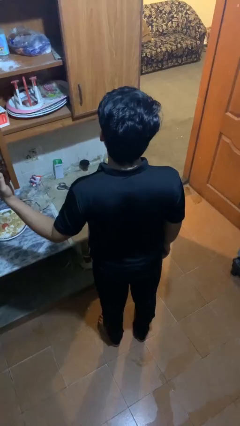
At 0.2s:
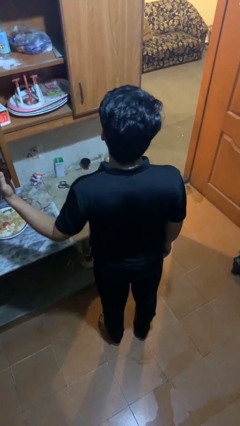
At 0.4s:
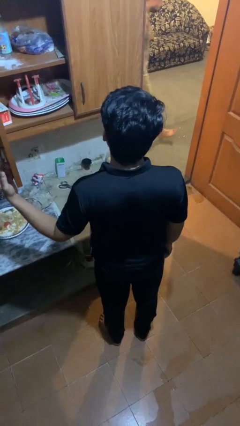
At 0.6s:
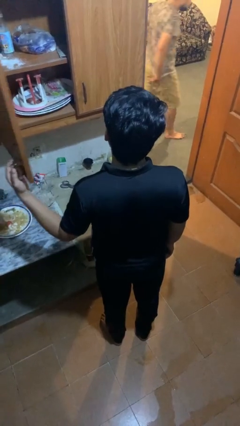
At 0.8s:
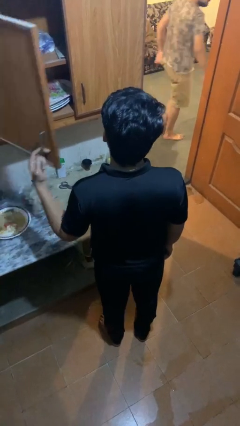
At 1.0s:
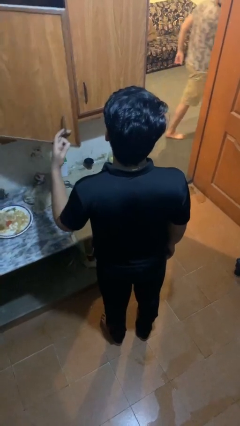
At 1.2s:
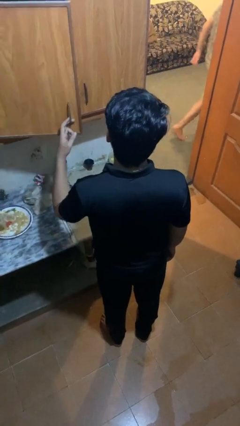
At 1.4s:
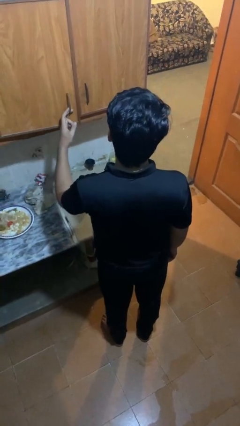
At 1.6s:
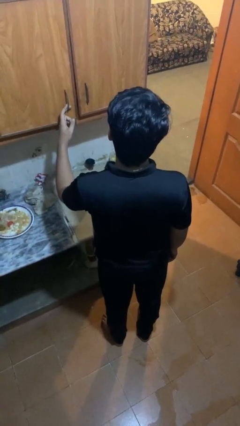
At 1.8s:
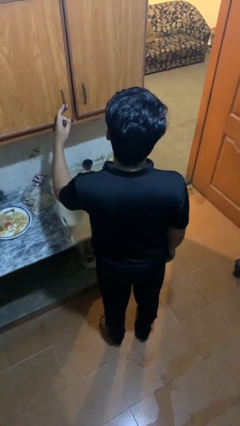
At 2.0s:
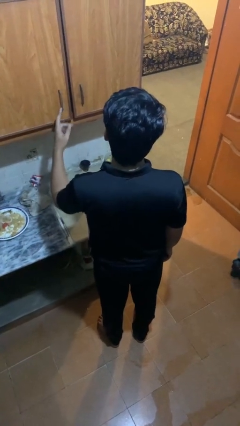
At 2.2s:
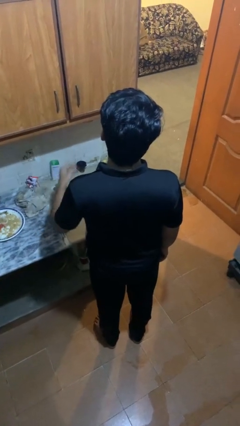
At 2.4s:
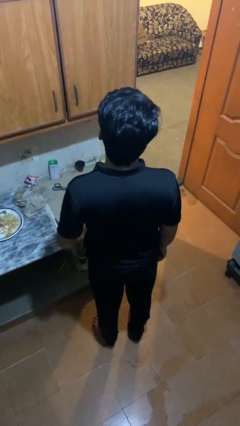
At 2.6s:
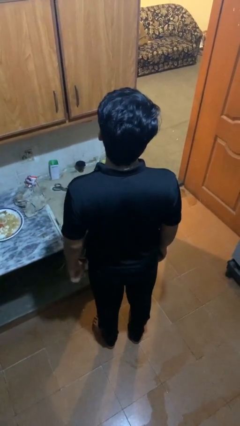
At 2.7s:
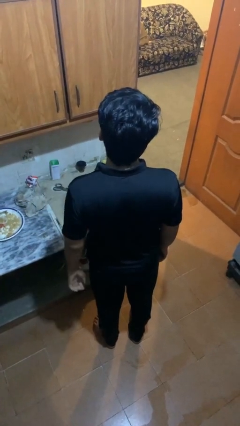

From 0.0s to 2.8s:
person closes cabinet

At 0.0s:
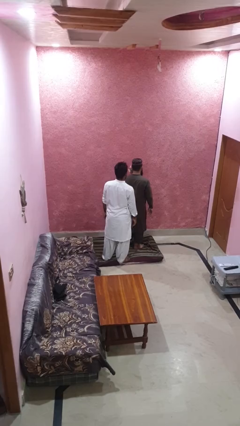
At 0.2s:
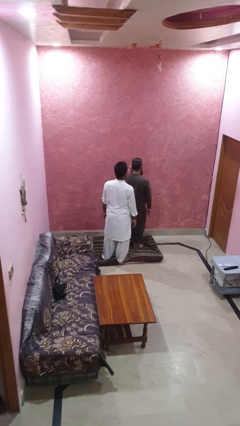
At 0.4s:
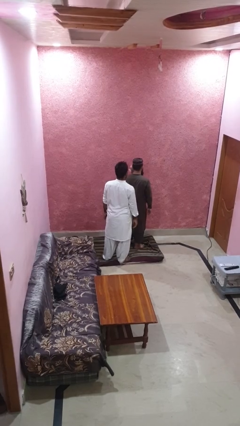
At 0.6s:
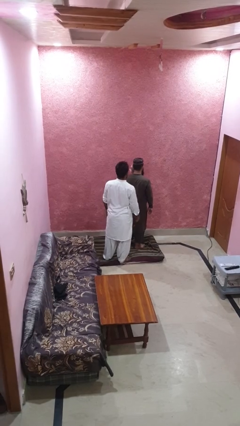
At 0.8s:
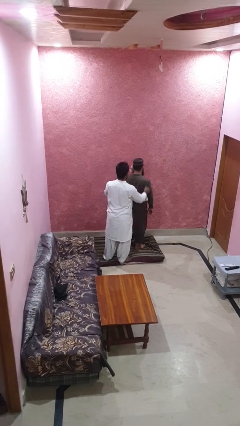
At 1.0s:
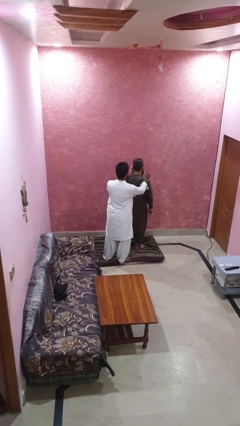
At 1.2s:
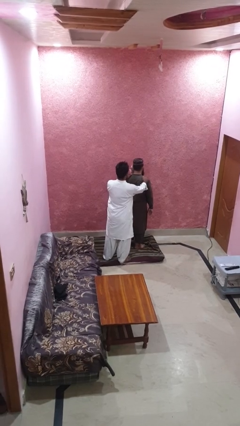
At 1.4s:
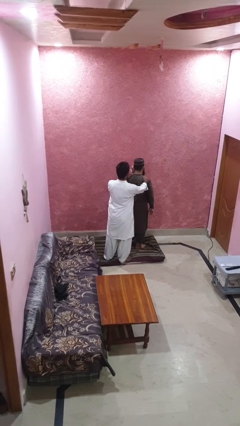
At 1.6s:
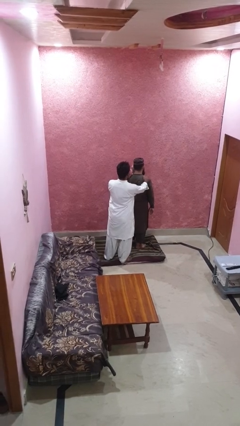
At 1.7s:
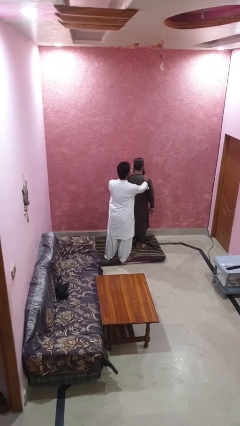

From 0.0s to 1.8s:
person grabs person by shoulder

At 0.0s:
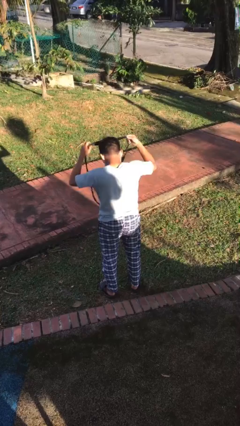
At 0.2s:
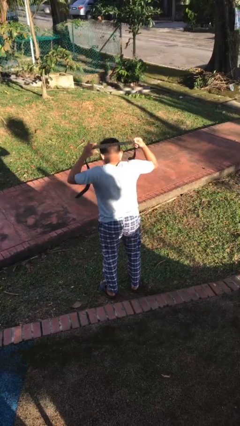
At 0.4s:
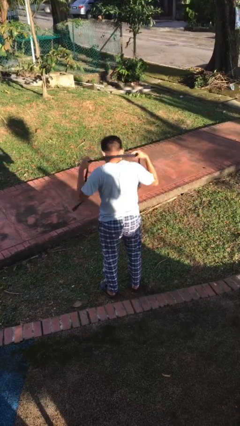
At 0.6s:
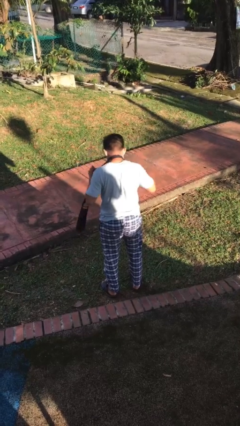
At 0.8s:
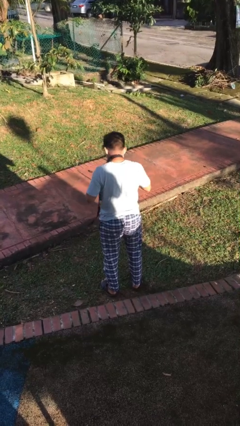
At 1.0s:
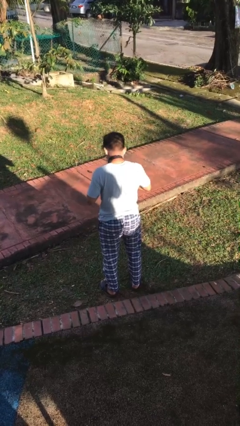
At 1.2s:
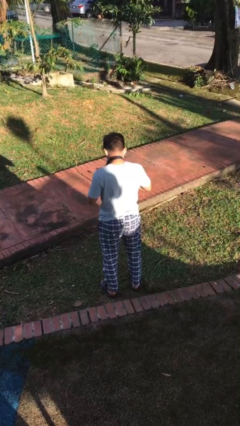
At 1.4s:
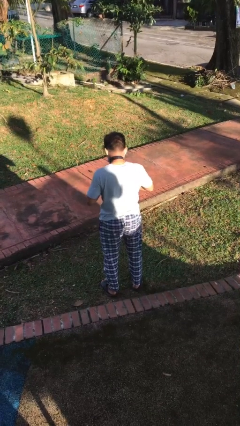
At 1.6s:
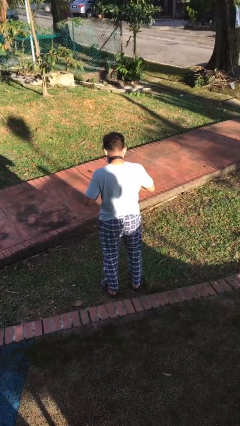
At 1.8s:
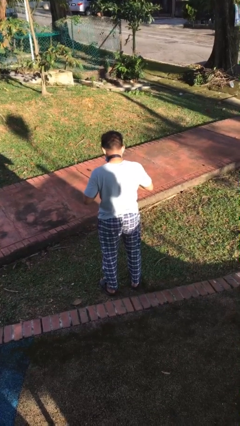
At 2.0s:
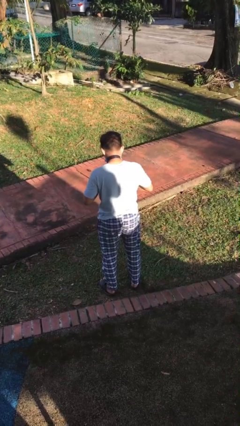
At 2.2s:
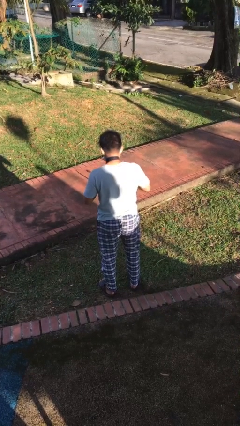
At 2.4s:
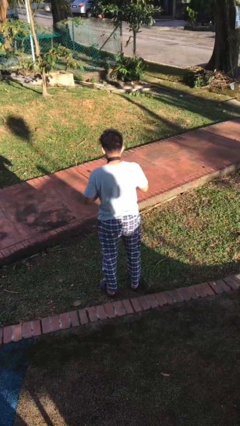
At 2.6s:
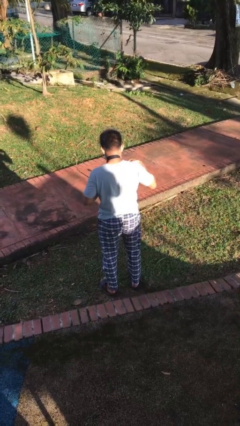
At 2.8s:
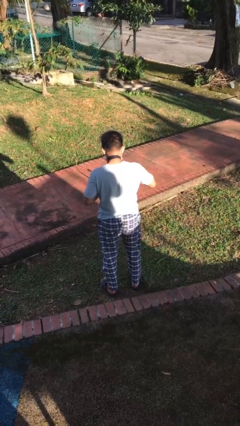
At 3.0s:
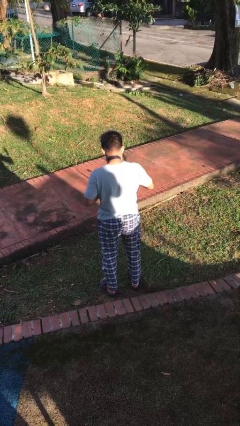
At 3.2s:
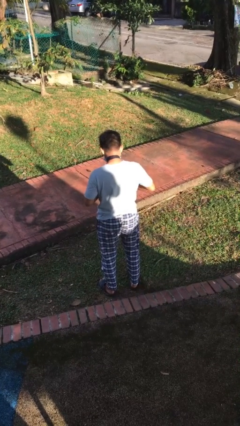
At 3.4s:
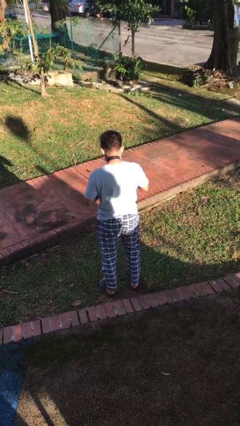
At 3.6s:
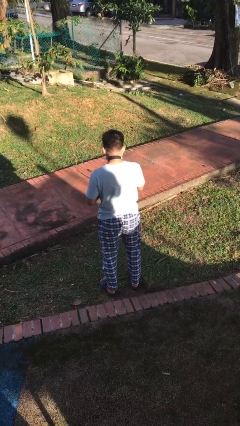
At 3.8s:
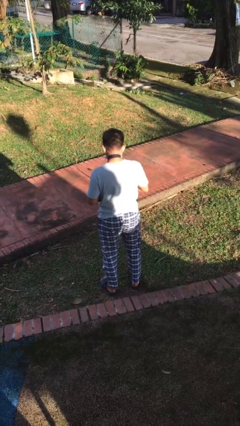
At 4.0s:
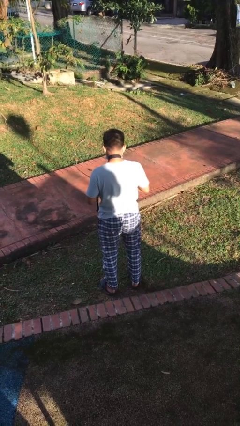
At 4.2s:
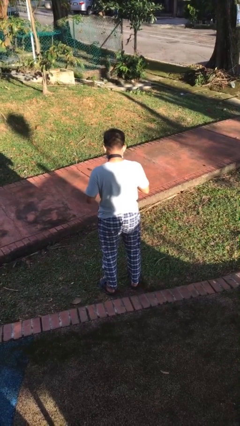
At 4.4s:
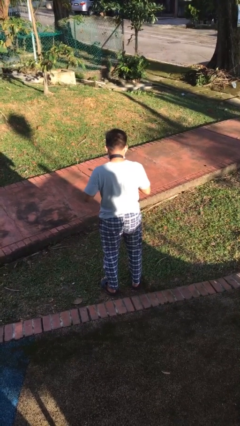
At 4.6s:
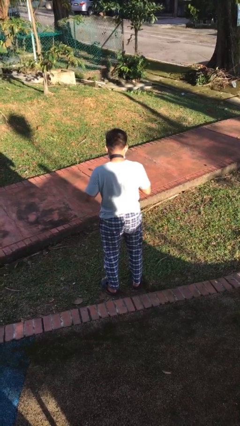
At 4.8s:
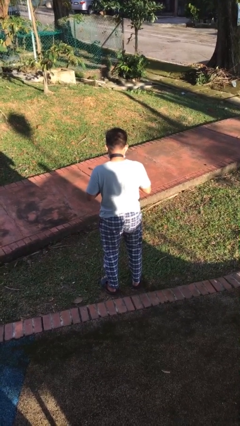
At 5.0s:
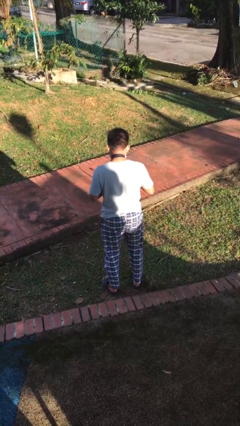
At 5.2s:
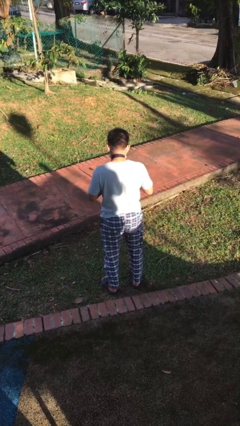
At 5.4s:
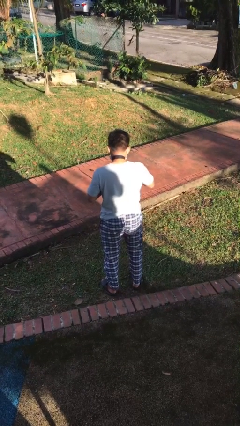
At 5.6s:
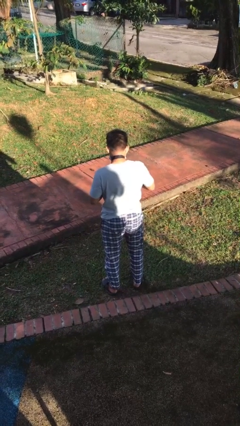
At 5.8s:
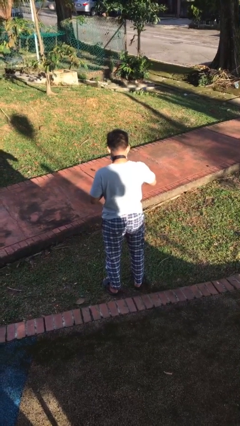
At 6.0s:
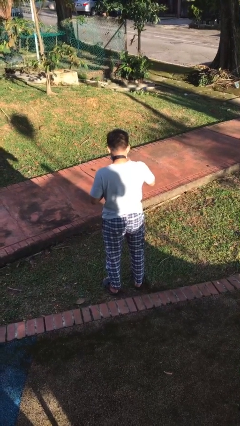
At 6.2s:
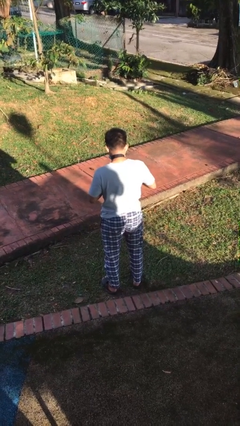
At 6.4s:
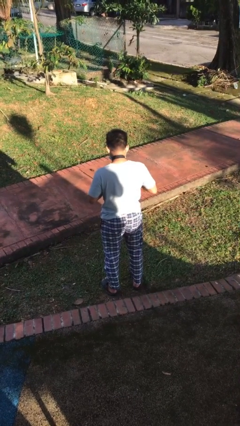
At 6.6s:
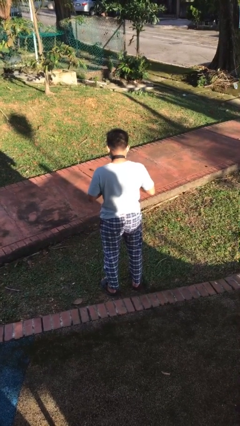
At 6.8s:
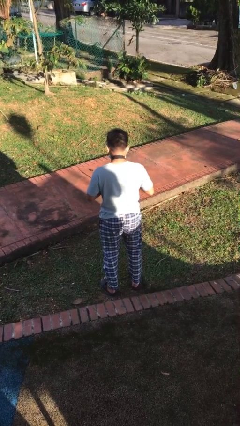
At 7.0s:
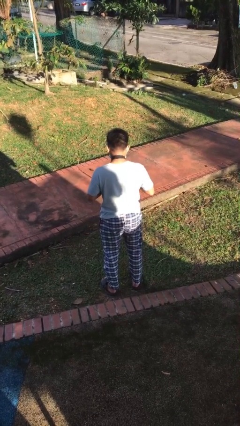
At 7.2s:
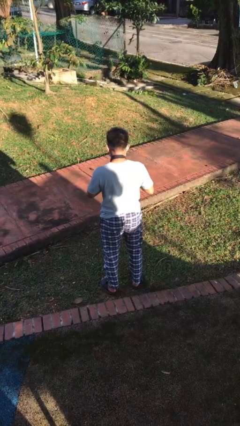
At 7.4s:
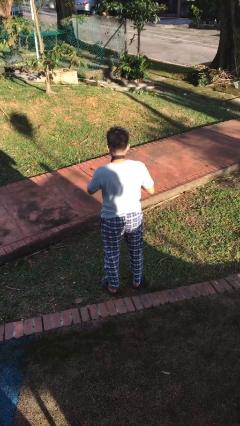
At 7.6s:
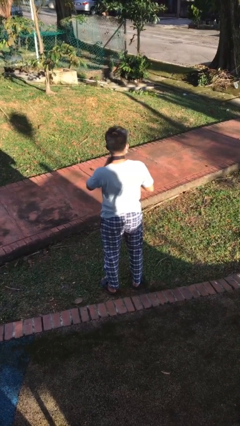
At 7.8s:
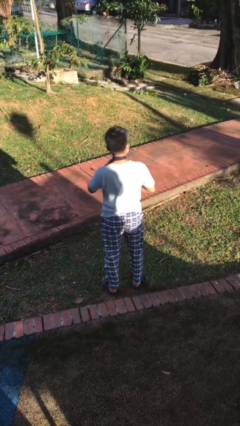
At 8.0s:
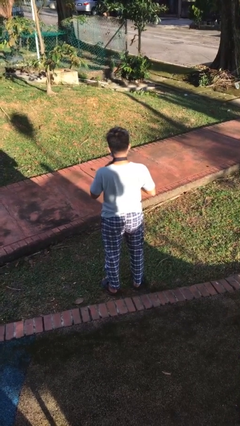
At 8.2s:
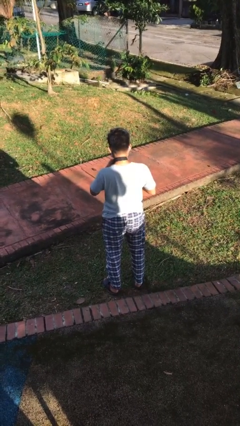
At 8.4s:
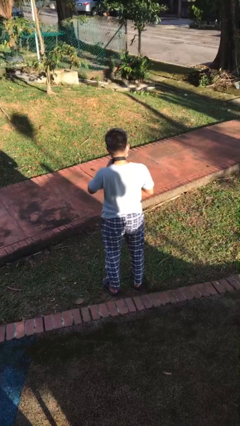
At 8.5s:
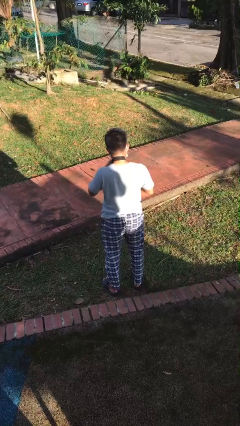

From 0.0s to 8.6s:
person puts on necktie

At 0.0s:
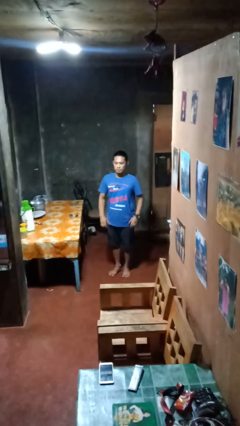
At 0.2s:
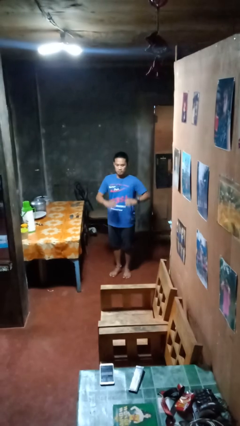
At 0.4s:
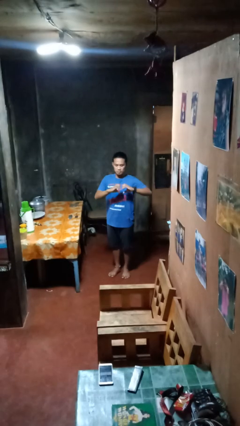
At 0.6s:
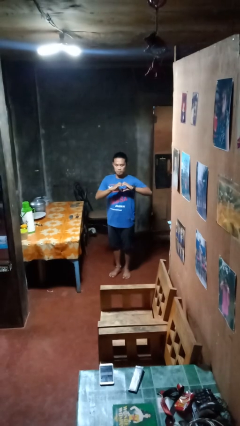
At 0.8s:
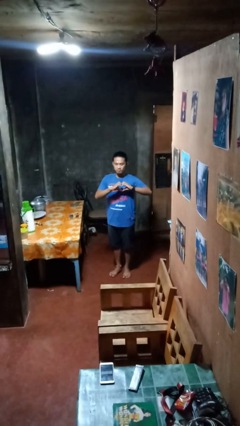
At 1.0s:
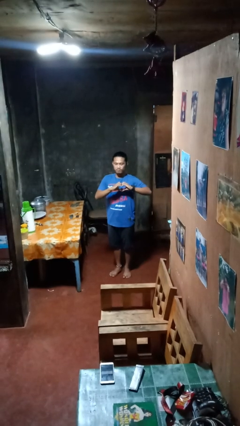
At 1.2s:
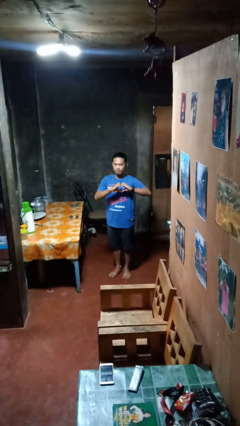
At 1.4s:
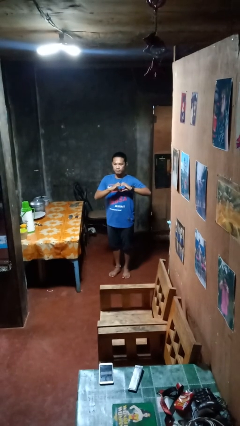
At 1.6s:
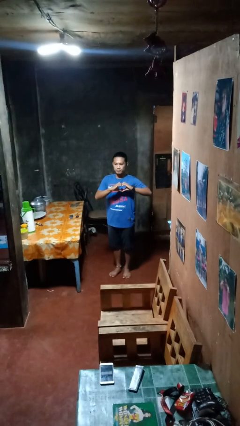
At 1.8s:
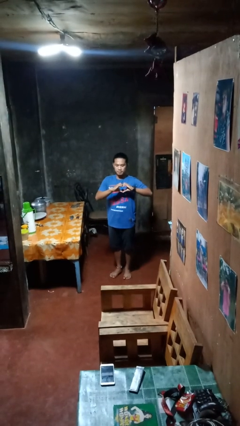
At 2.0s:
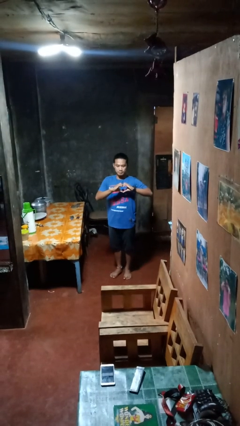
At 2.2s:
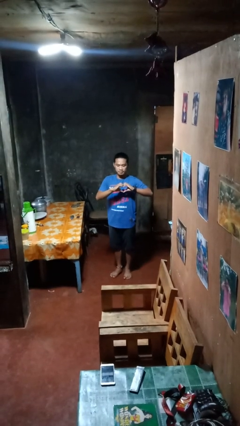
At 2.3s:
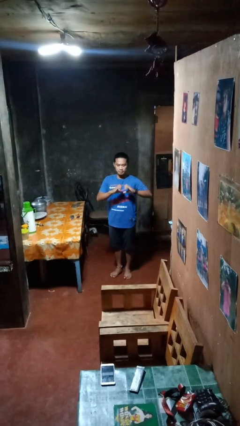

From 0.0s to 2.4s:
person gestures heart

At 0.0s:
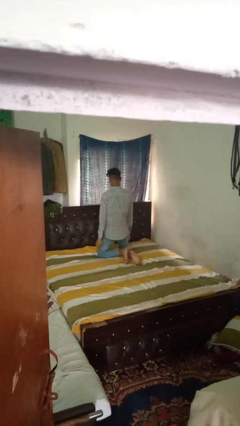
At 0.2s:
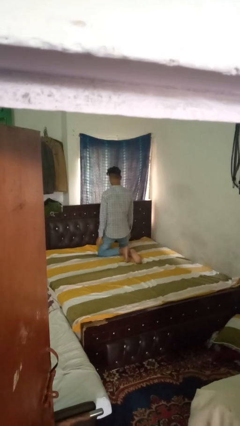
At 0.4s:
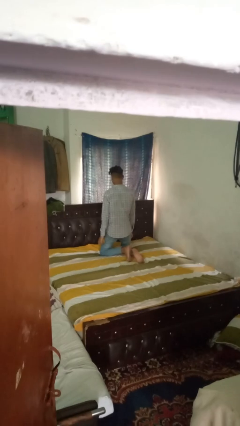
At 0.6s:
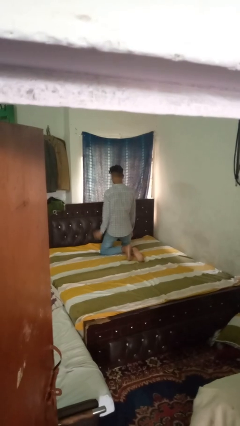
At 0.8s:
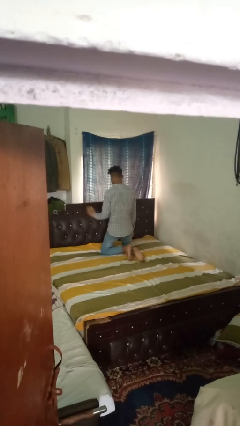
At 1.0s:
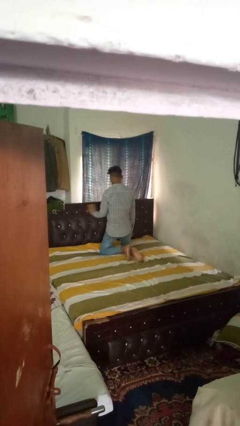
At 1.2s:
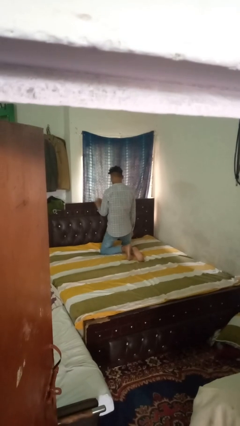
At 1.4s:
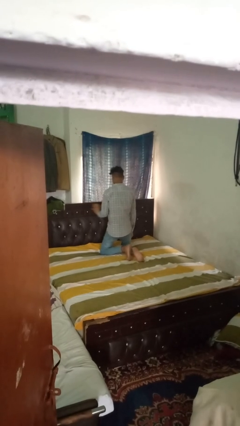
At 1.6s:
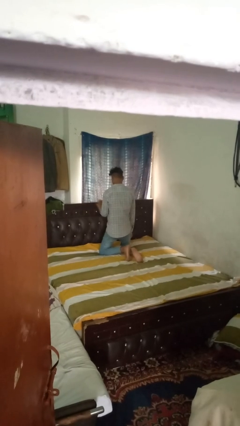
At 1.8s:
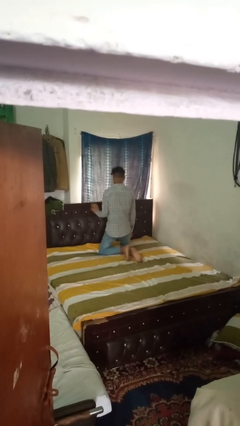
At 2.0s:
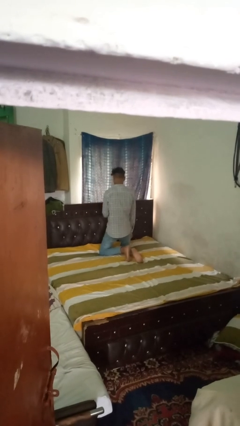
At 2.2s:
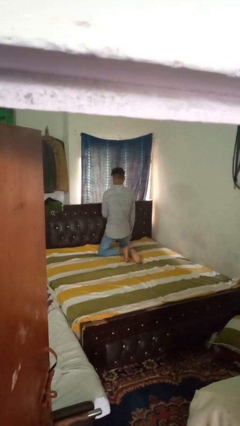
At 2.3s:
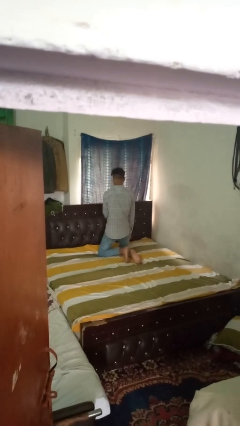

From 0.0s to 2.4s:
person dusts furniture
